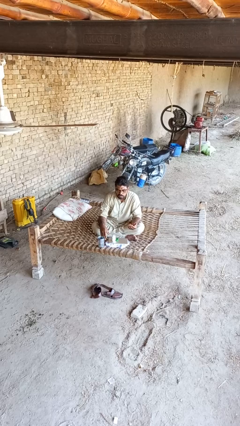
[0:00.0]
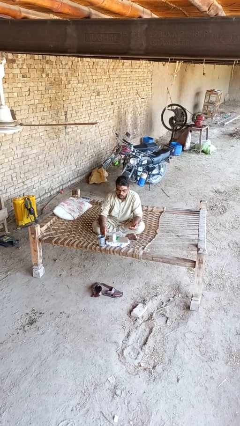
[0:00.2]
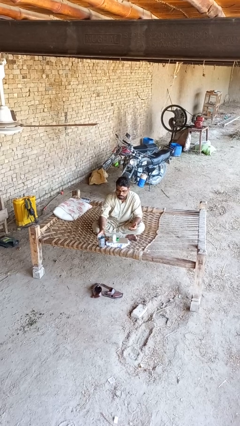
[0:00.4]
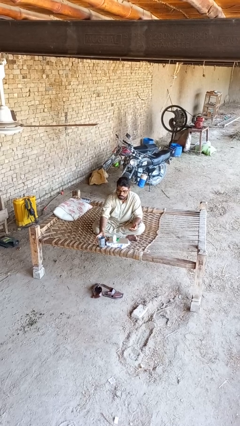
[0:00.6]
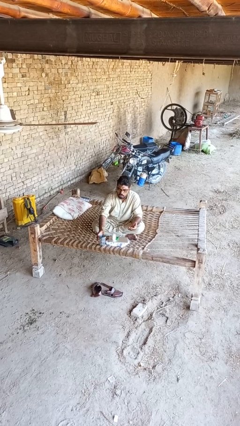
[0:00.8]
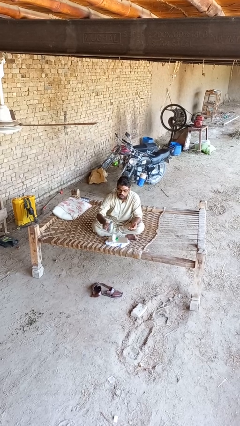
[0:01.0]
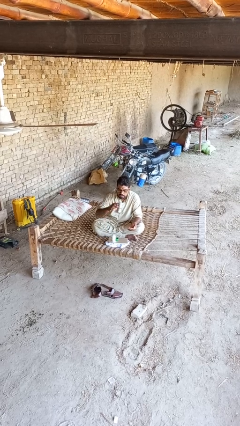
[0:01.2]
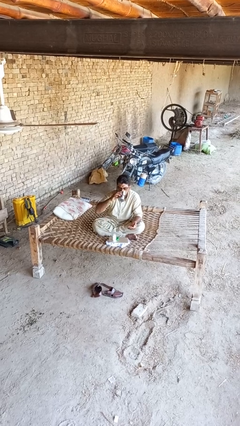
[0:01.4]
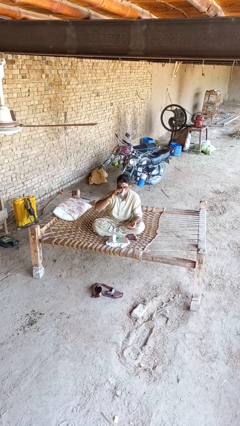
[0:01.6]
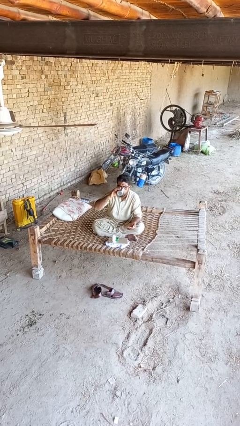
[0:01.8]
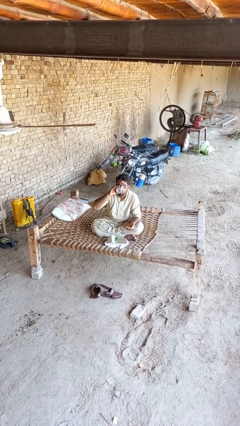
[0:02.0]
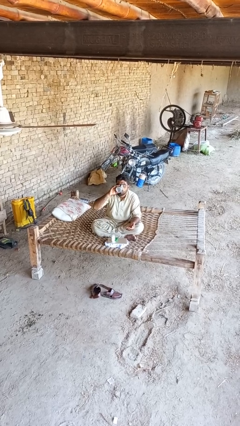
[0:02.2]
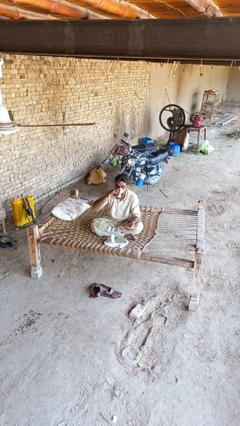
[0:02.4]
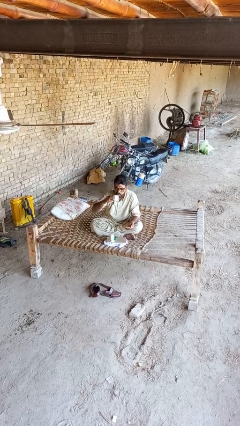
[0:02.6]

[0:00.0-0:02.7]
person drinks from cup

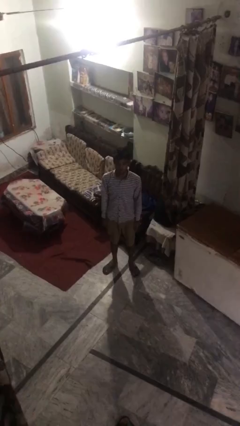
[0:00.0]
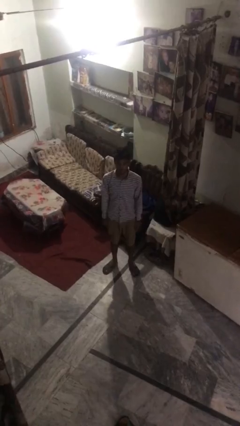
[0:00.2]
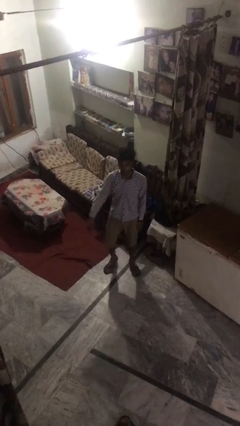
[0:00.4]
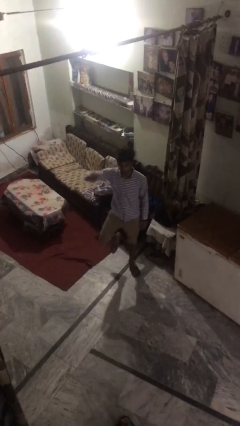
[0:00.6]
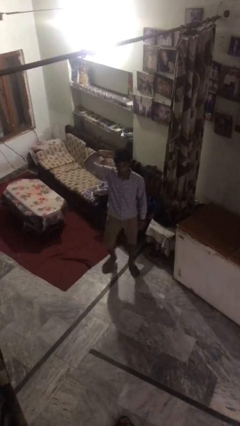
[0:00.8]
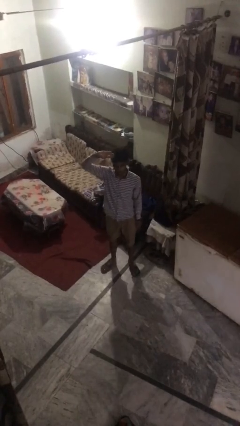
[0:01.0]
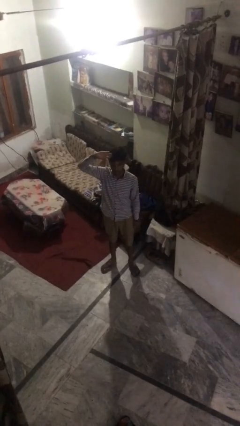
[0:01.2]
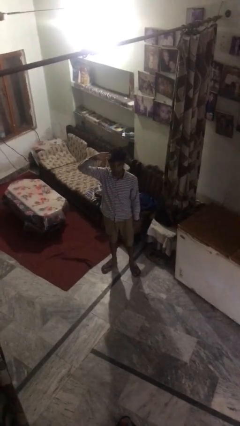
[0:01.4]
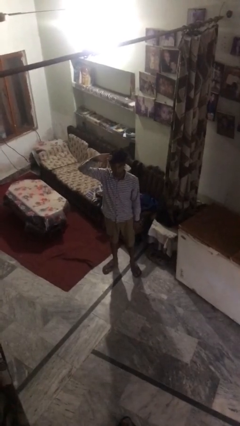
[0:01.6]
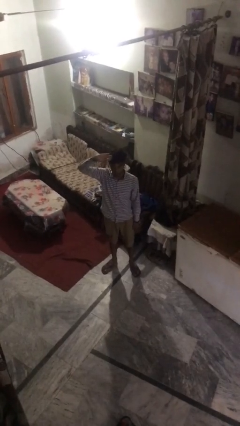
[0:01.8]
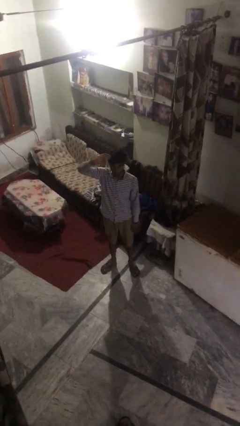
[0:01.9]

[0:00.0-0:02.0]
person salutes

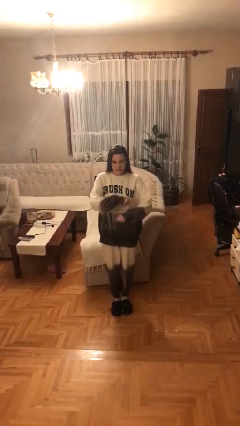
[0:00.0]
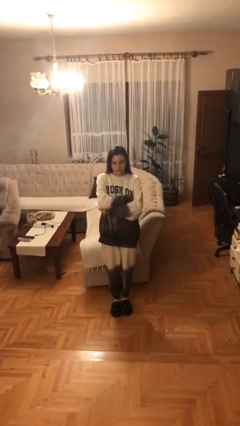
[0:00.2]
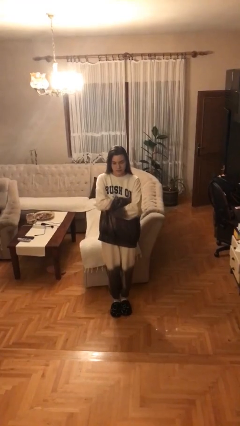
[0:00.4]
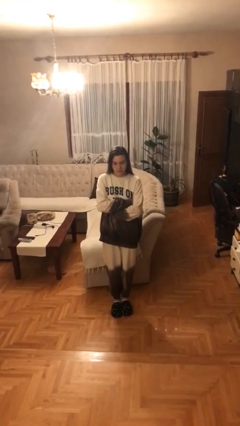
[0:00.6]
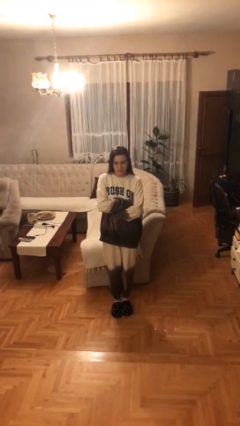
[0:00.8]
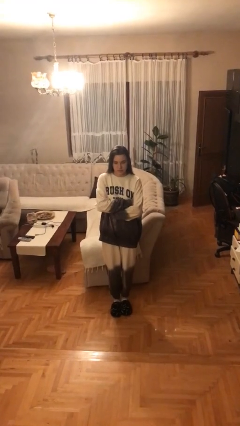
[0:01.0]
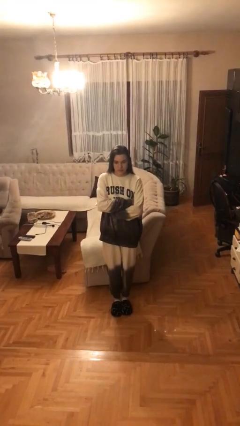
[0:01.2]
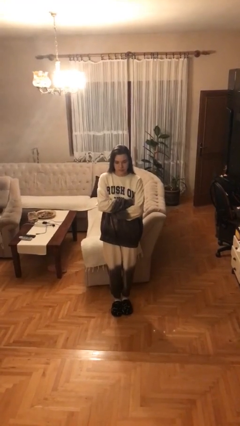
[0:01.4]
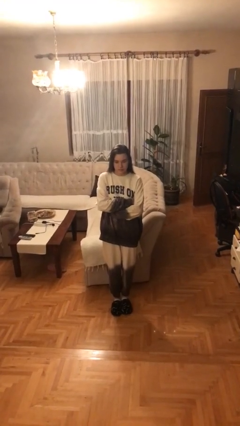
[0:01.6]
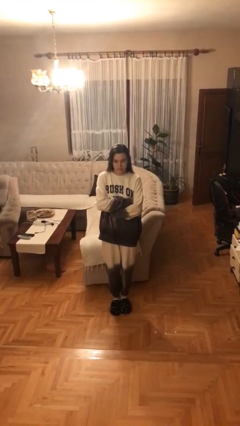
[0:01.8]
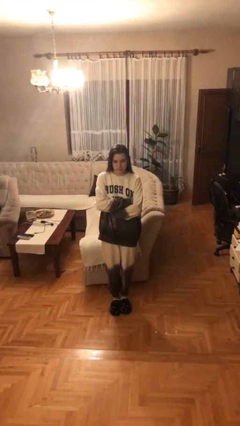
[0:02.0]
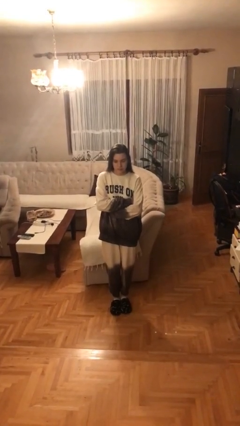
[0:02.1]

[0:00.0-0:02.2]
person crosses arms

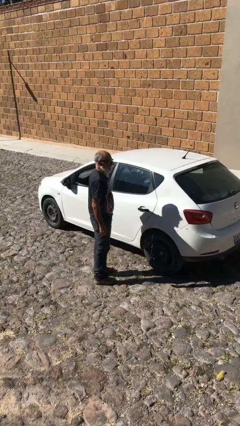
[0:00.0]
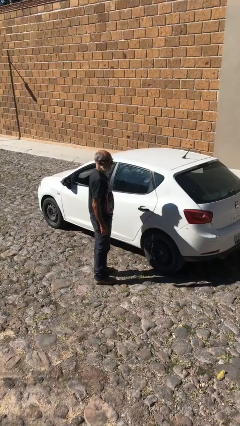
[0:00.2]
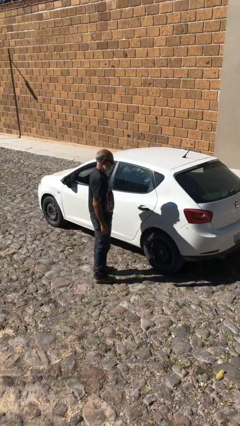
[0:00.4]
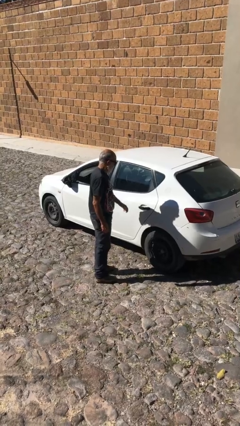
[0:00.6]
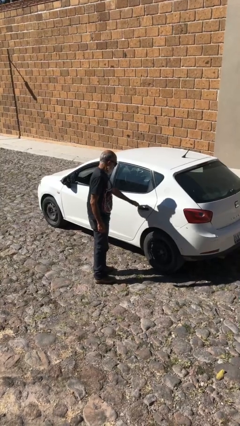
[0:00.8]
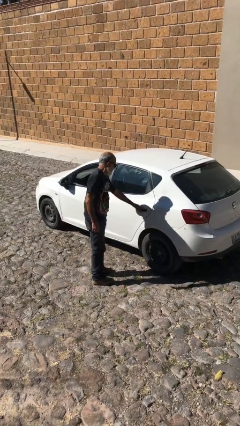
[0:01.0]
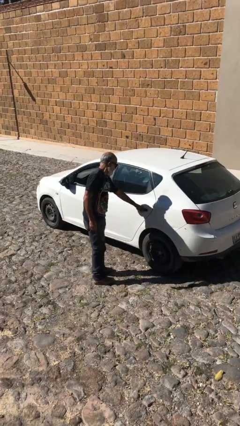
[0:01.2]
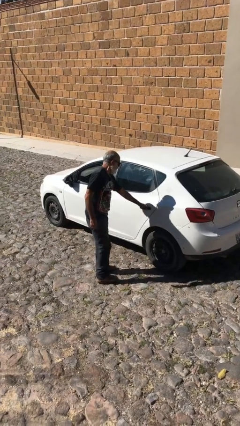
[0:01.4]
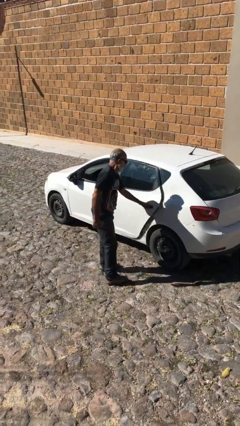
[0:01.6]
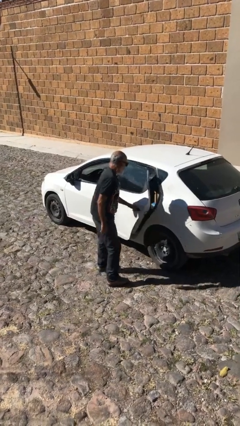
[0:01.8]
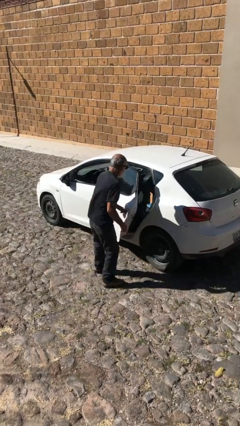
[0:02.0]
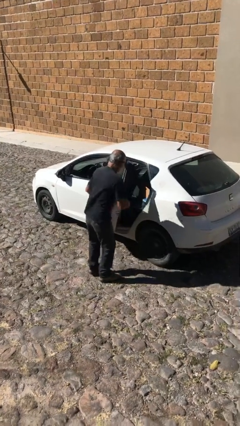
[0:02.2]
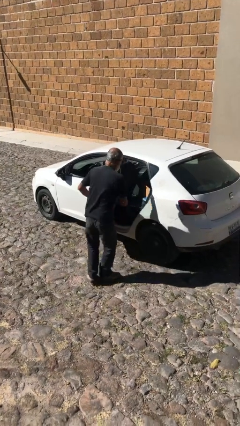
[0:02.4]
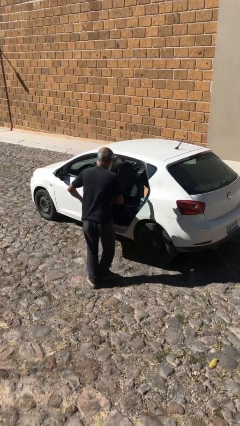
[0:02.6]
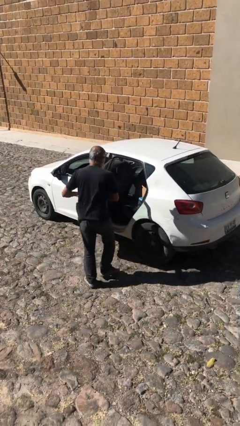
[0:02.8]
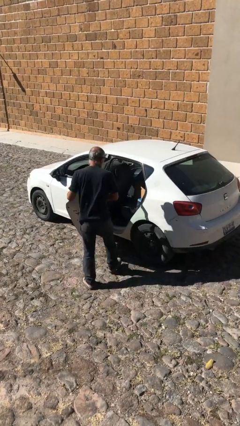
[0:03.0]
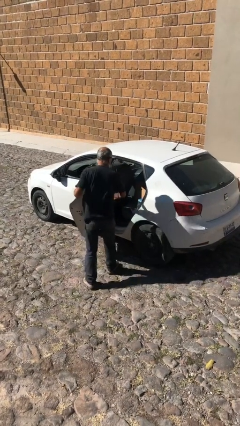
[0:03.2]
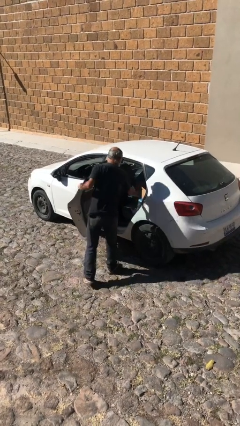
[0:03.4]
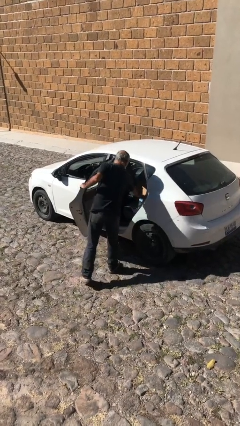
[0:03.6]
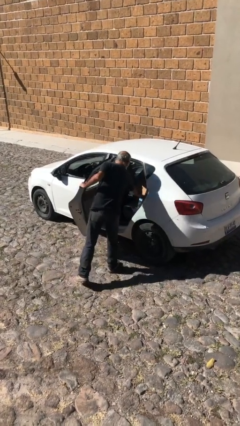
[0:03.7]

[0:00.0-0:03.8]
person opens car door

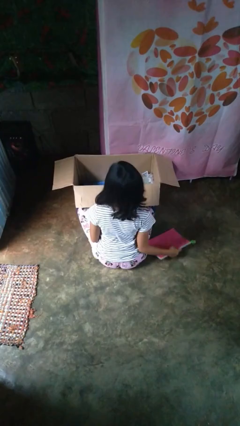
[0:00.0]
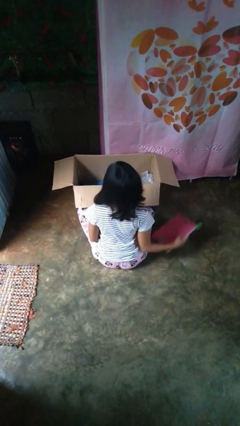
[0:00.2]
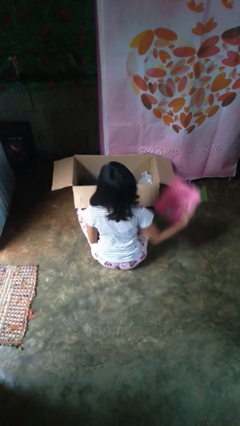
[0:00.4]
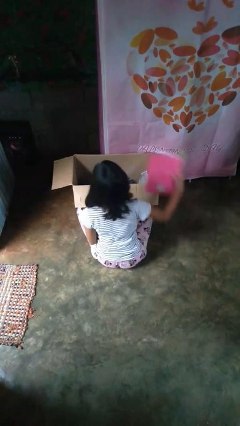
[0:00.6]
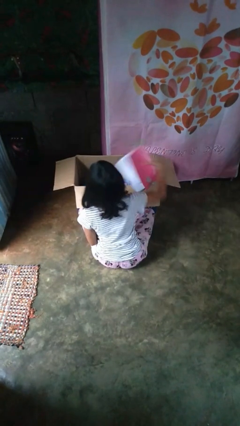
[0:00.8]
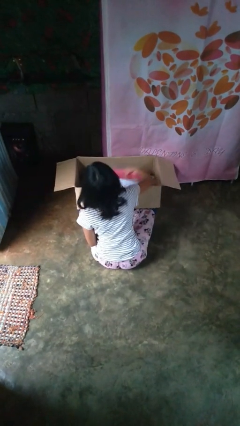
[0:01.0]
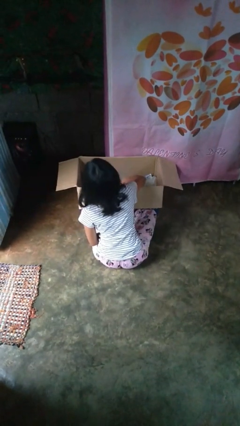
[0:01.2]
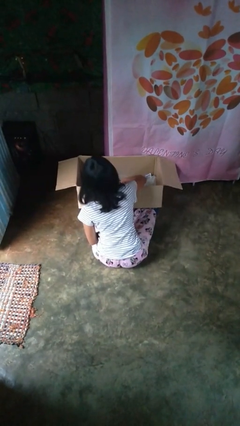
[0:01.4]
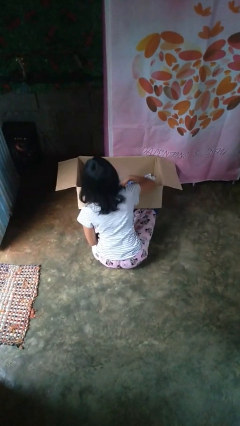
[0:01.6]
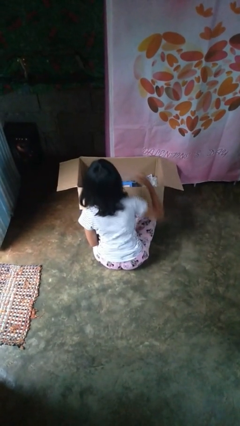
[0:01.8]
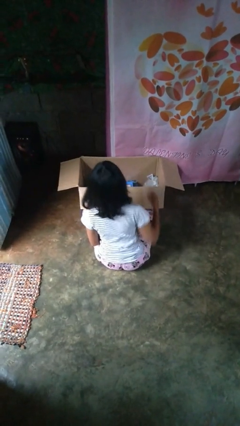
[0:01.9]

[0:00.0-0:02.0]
person puts object into box

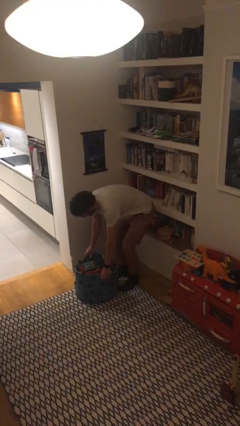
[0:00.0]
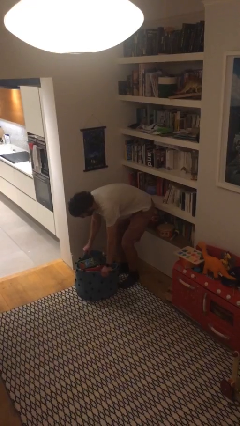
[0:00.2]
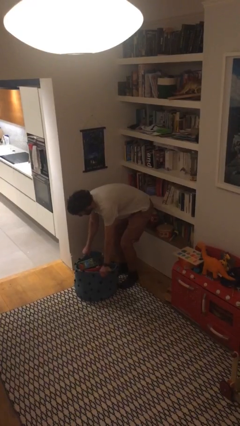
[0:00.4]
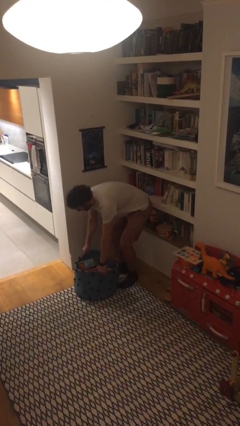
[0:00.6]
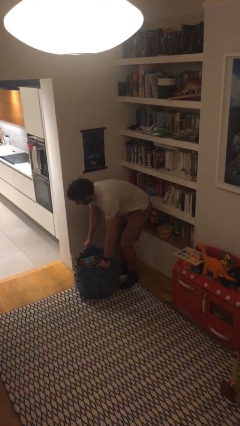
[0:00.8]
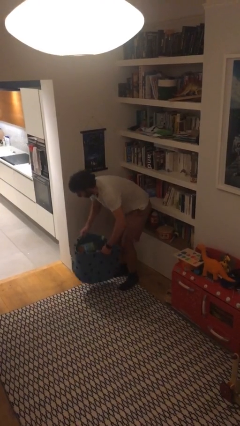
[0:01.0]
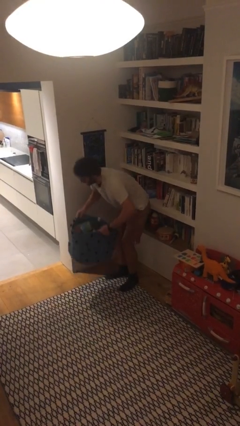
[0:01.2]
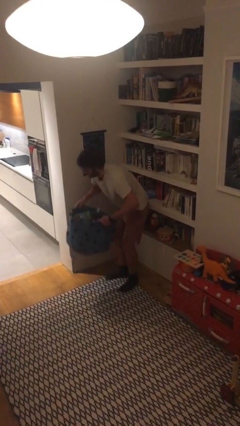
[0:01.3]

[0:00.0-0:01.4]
person picks up object from floor

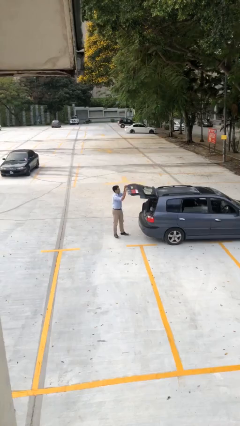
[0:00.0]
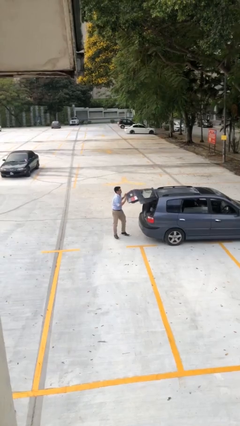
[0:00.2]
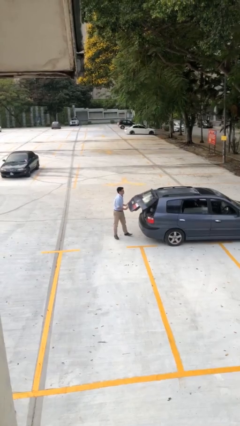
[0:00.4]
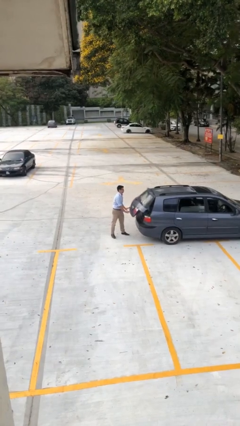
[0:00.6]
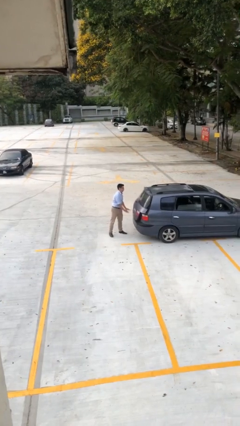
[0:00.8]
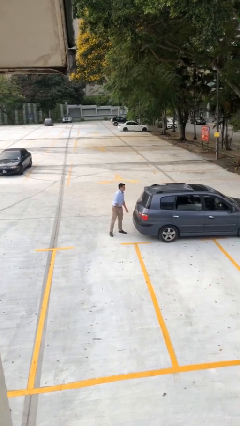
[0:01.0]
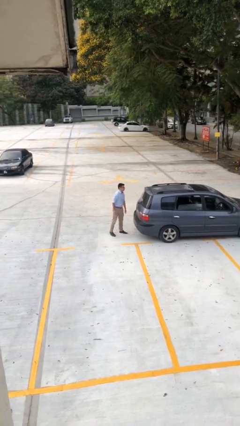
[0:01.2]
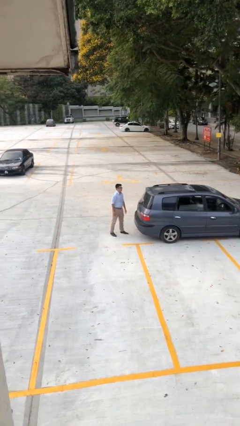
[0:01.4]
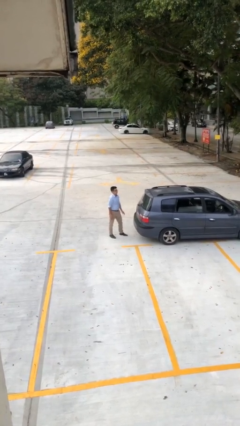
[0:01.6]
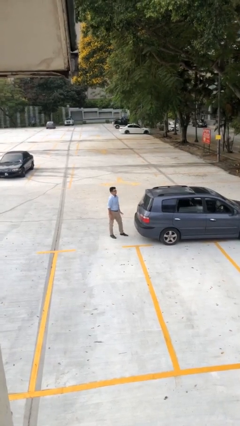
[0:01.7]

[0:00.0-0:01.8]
person closes car trunk

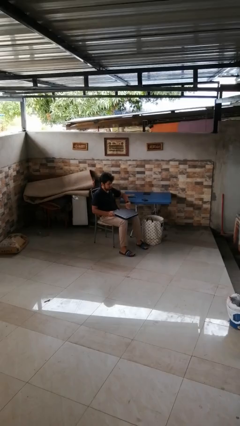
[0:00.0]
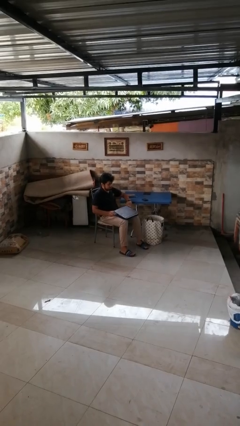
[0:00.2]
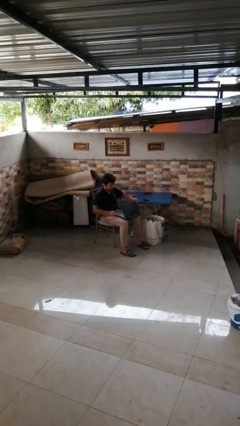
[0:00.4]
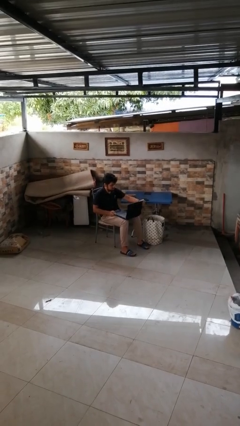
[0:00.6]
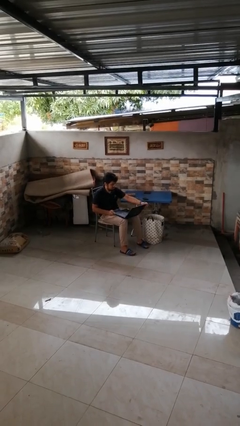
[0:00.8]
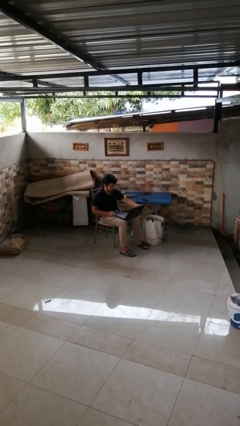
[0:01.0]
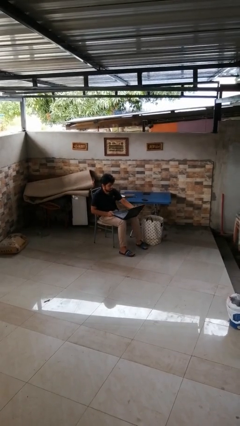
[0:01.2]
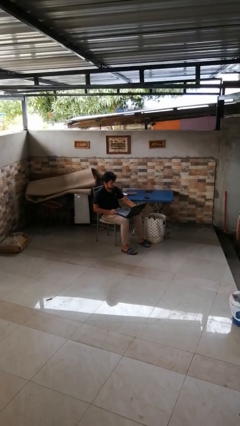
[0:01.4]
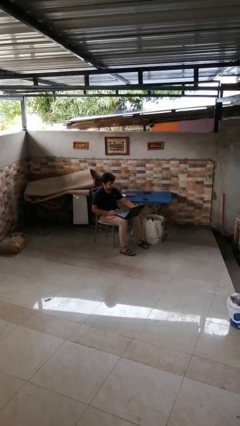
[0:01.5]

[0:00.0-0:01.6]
person opens laptop
